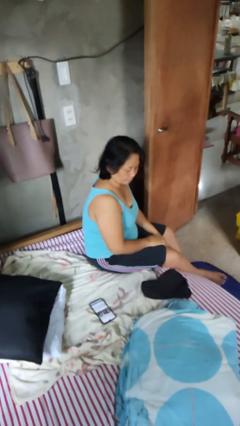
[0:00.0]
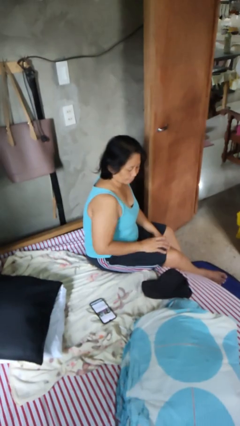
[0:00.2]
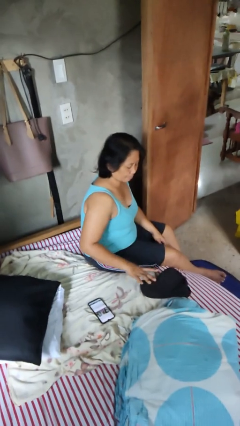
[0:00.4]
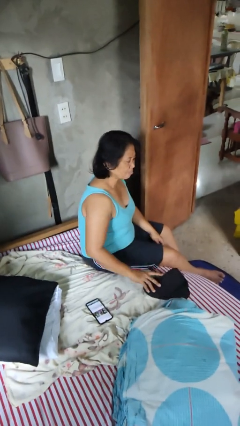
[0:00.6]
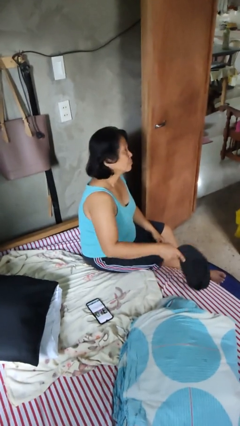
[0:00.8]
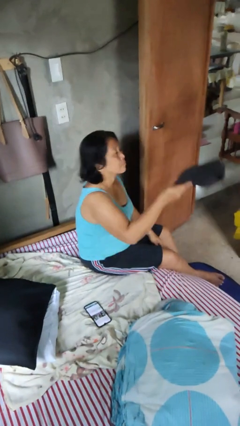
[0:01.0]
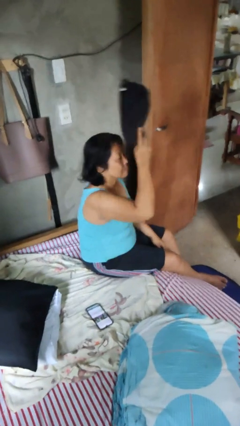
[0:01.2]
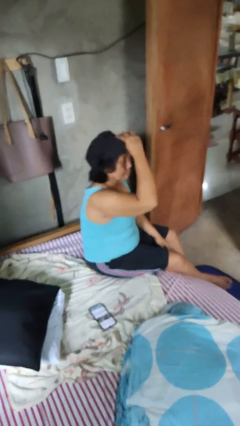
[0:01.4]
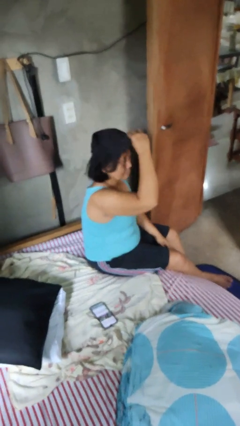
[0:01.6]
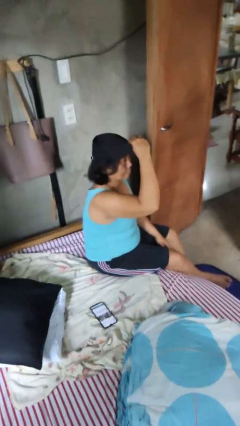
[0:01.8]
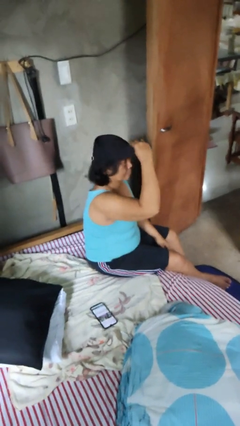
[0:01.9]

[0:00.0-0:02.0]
person puts on hat

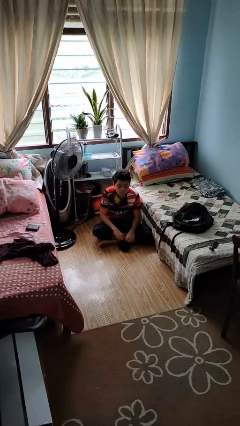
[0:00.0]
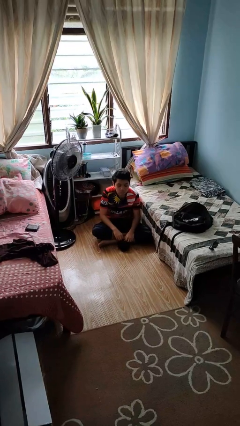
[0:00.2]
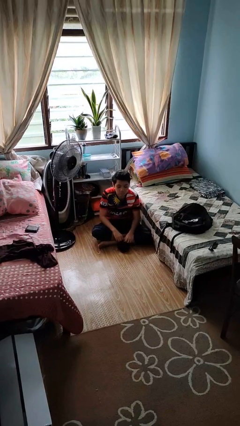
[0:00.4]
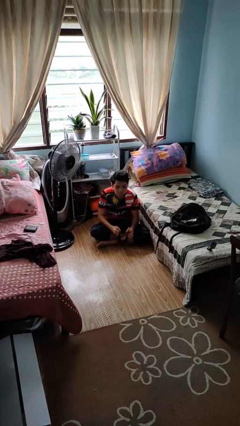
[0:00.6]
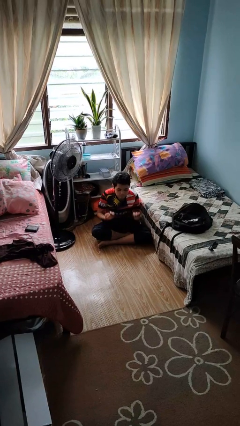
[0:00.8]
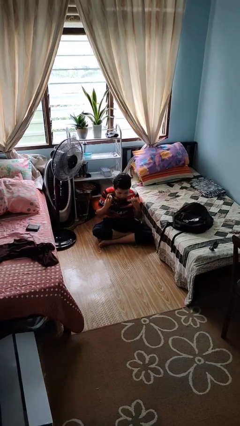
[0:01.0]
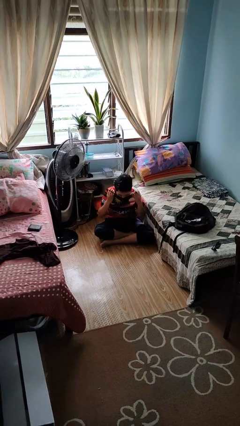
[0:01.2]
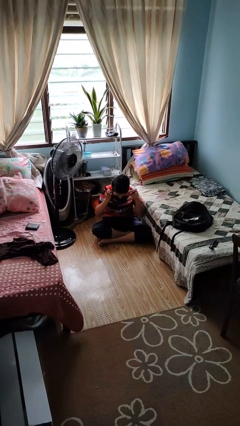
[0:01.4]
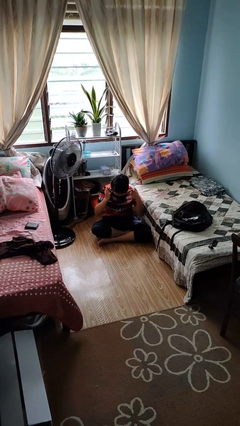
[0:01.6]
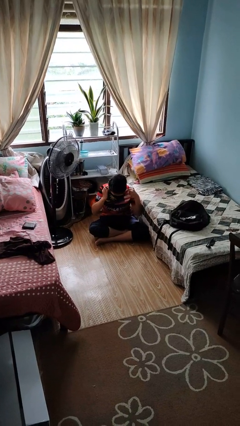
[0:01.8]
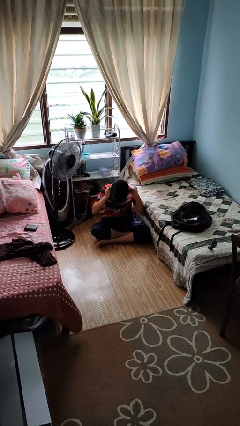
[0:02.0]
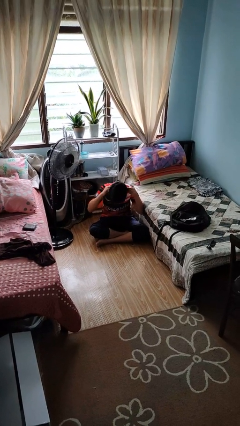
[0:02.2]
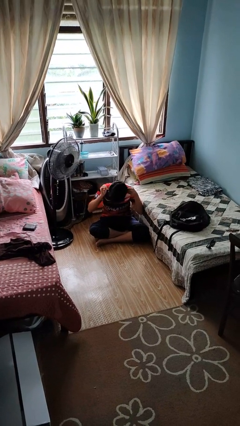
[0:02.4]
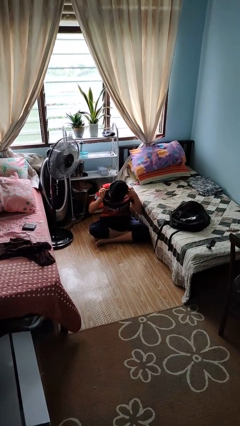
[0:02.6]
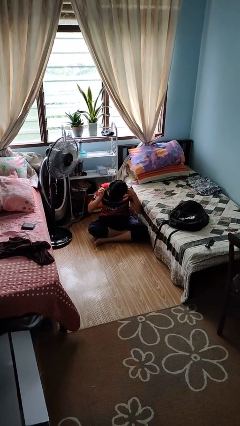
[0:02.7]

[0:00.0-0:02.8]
person puts on facemask

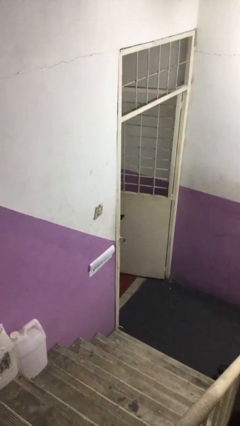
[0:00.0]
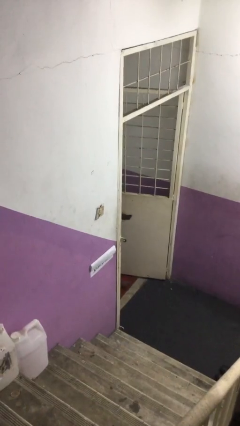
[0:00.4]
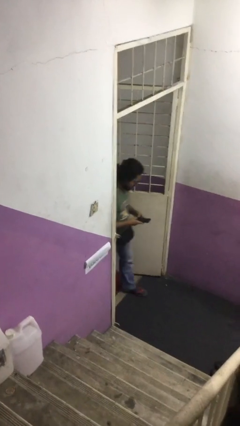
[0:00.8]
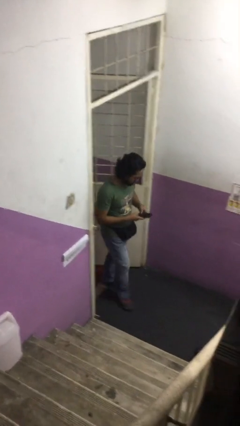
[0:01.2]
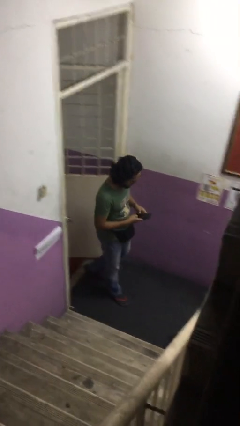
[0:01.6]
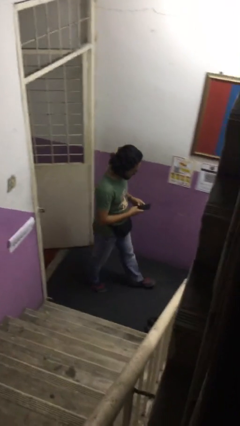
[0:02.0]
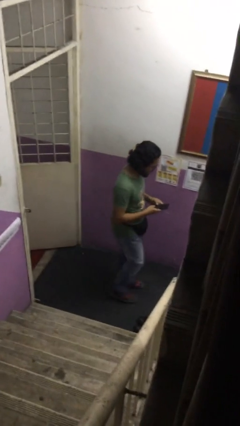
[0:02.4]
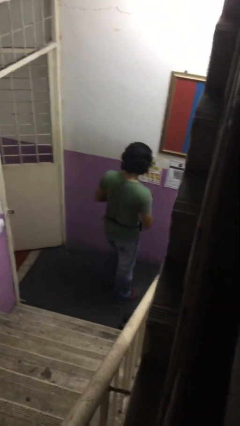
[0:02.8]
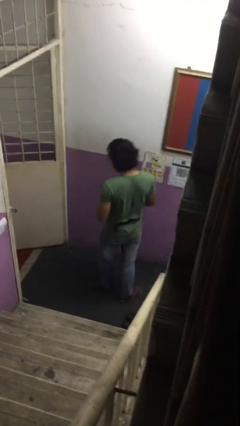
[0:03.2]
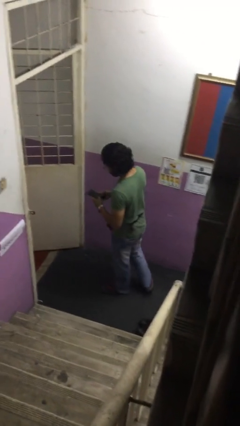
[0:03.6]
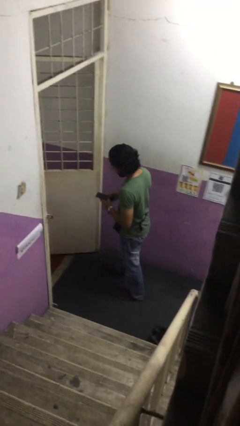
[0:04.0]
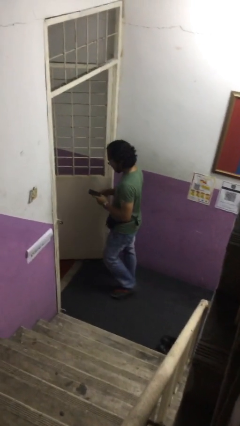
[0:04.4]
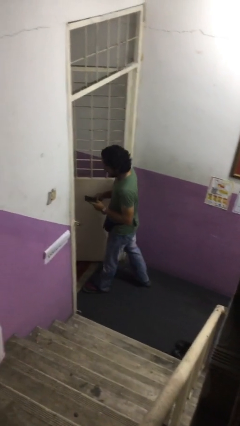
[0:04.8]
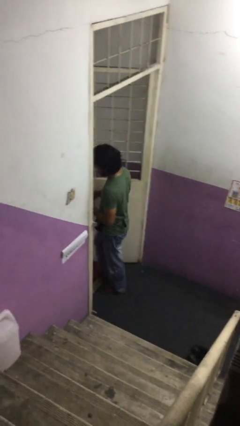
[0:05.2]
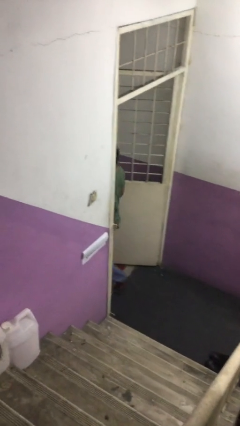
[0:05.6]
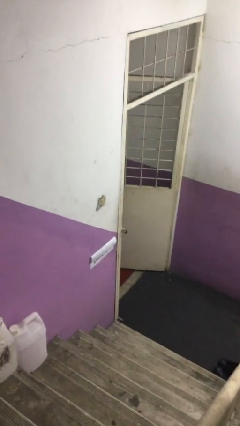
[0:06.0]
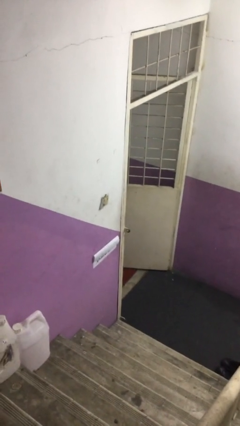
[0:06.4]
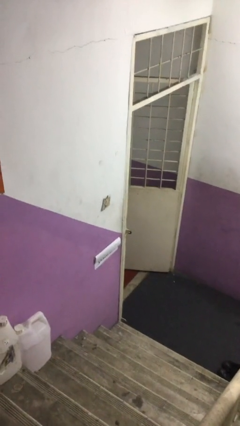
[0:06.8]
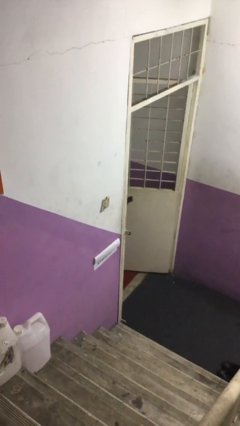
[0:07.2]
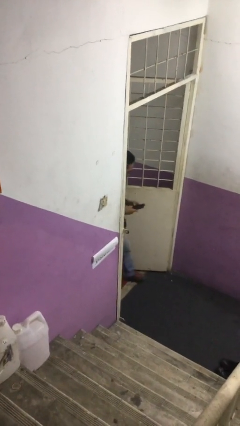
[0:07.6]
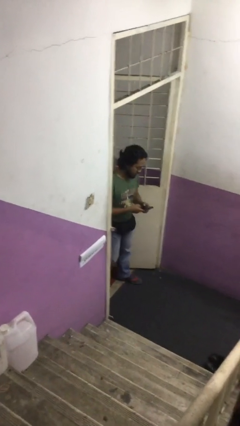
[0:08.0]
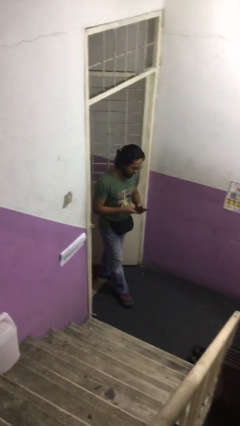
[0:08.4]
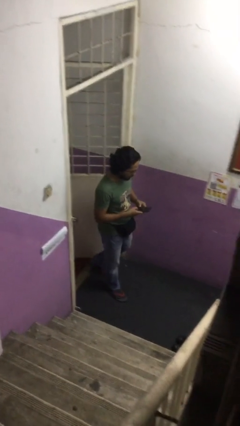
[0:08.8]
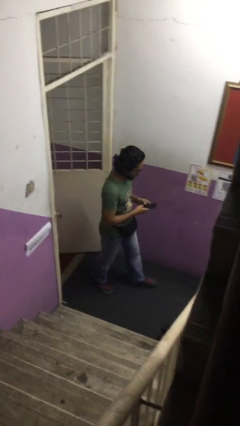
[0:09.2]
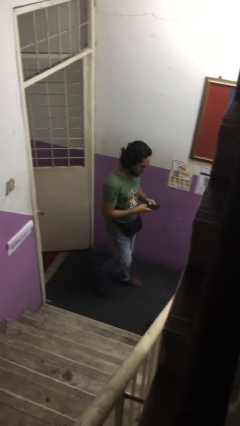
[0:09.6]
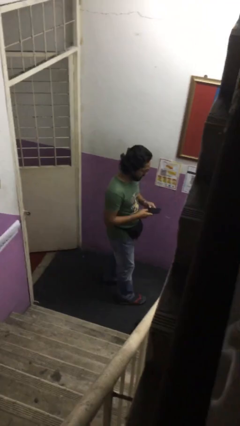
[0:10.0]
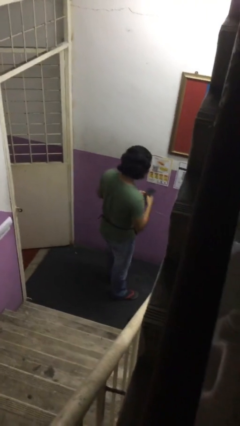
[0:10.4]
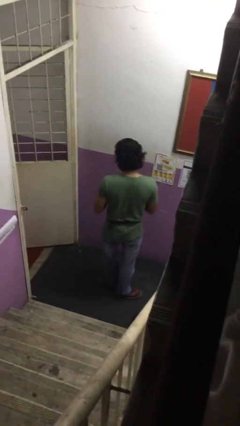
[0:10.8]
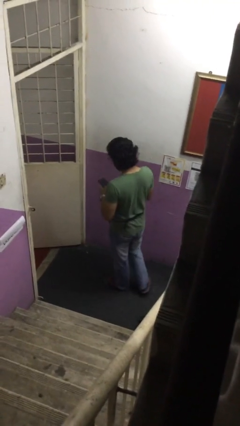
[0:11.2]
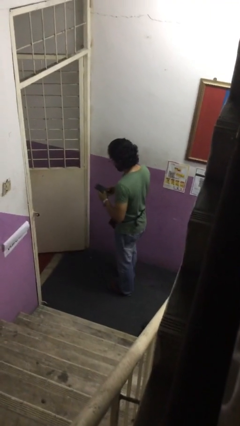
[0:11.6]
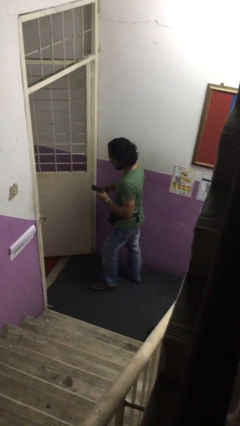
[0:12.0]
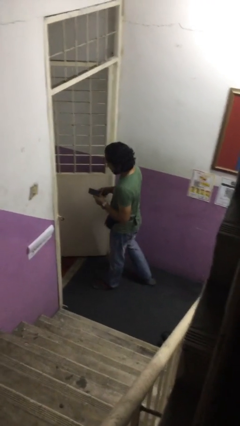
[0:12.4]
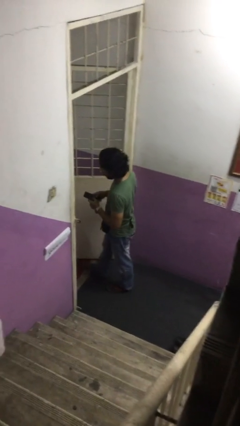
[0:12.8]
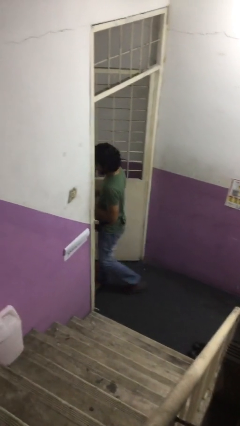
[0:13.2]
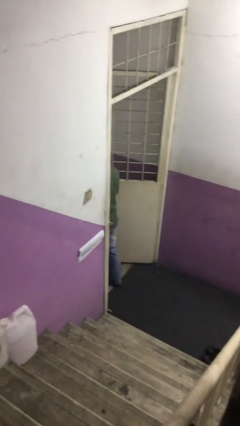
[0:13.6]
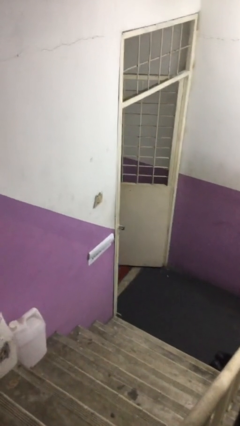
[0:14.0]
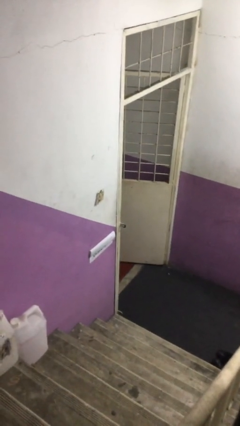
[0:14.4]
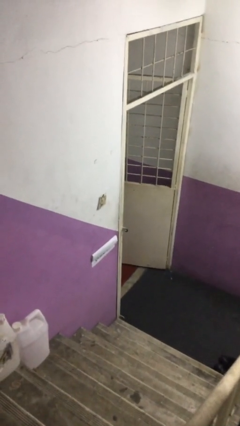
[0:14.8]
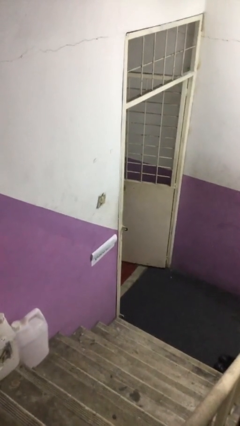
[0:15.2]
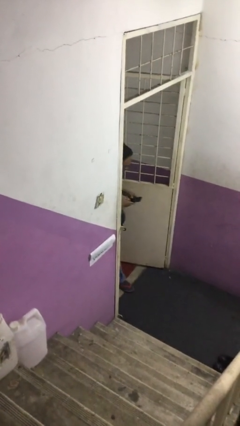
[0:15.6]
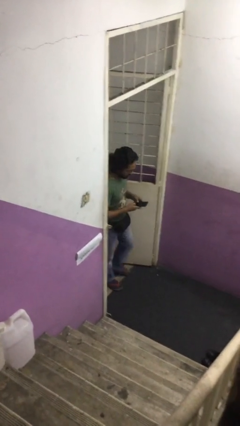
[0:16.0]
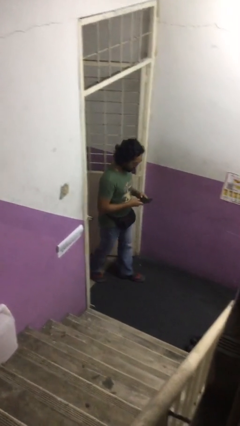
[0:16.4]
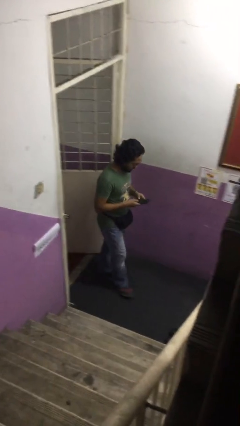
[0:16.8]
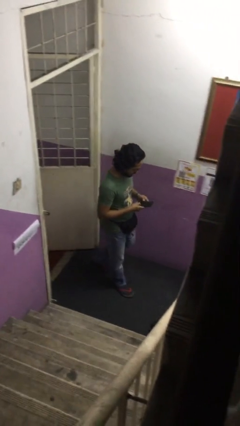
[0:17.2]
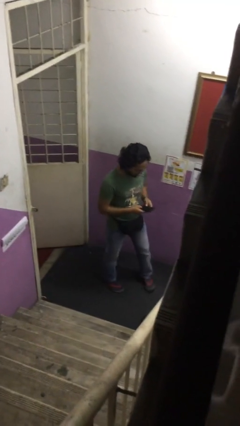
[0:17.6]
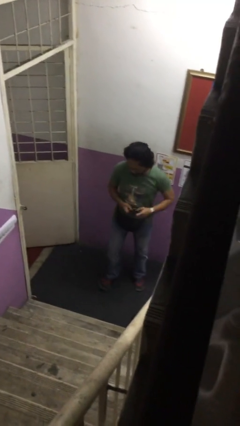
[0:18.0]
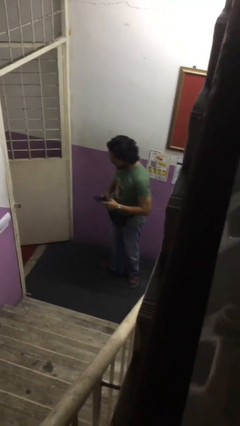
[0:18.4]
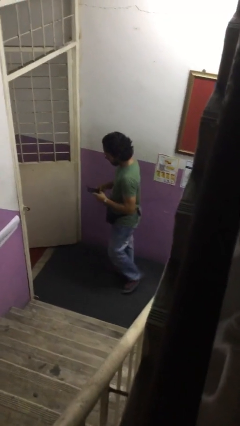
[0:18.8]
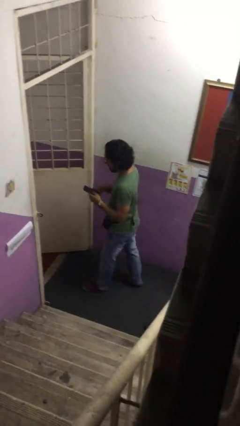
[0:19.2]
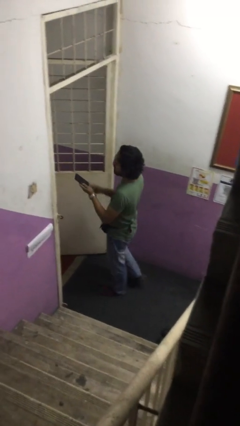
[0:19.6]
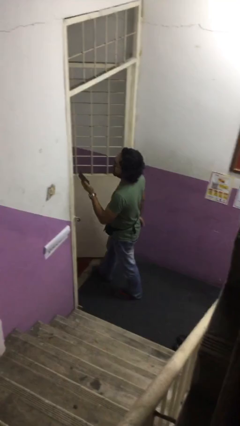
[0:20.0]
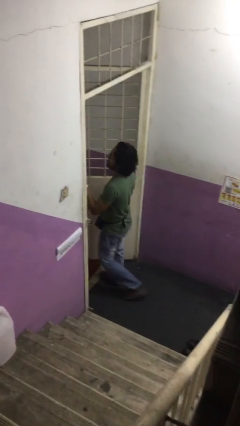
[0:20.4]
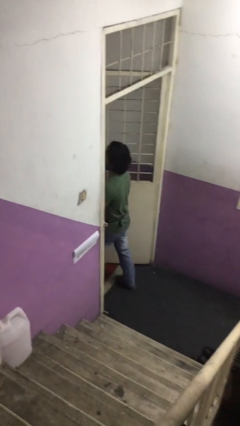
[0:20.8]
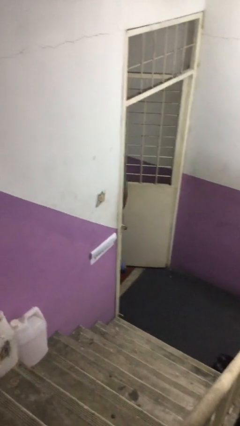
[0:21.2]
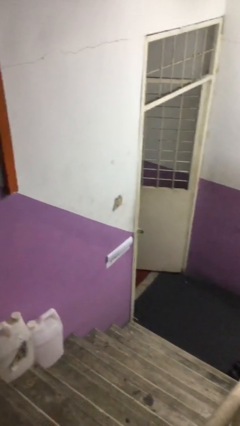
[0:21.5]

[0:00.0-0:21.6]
person texts on phone

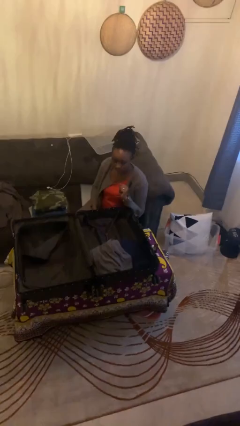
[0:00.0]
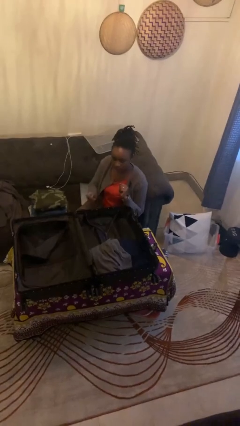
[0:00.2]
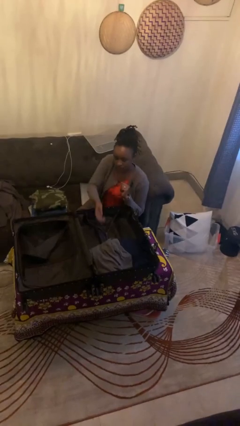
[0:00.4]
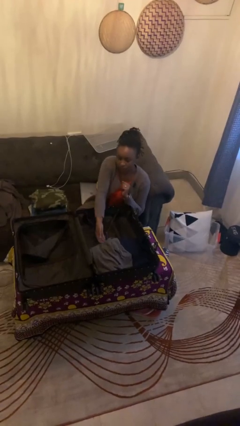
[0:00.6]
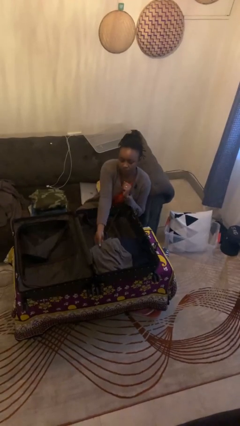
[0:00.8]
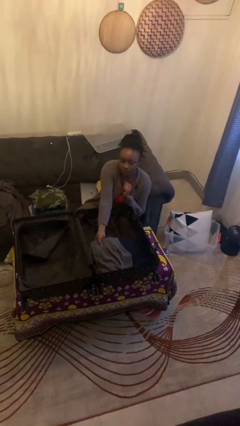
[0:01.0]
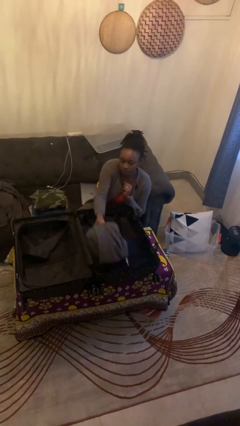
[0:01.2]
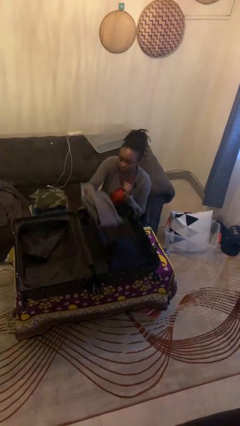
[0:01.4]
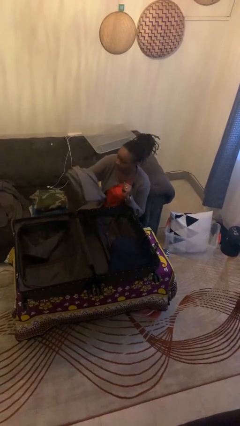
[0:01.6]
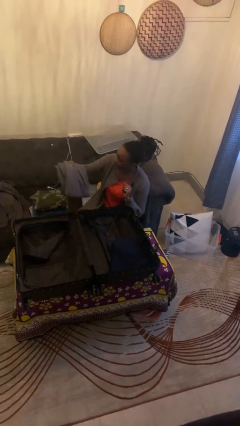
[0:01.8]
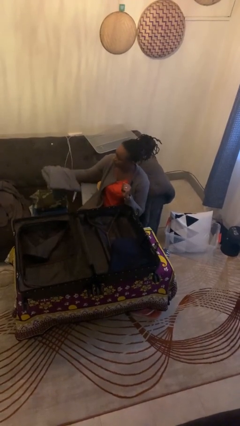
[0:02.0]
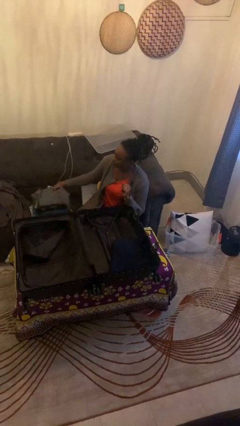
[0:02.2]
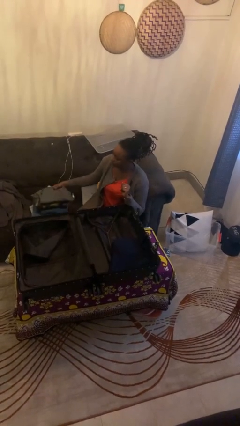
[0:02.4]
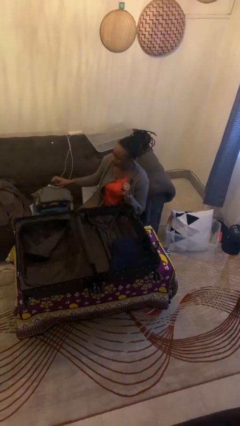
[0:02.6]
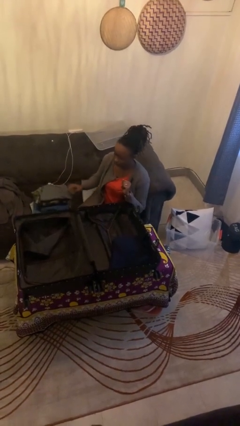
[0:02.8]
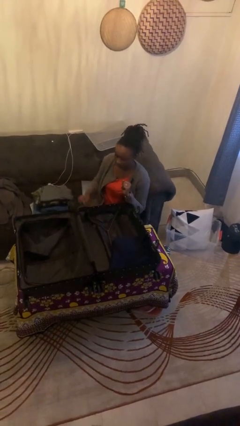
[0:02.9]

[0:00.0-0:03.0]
person unloads clothes from suitcase
